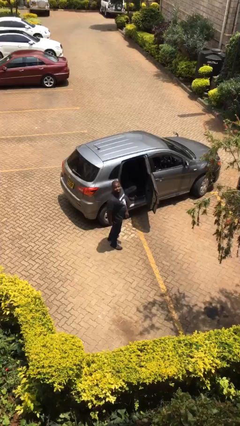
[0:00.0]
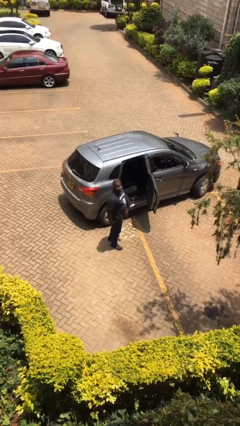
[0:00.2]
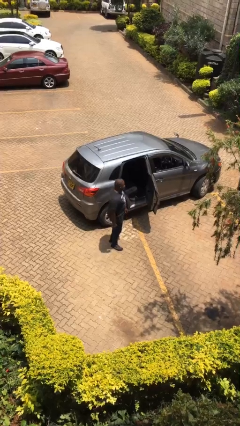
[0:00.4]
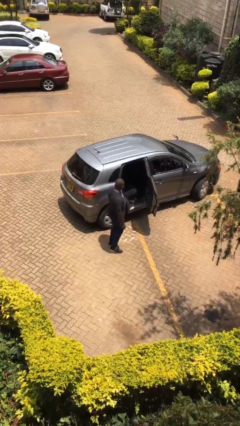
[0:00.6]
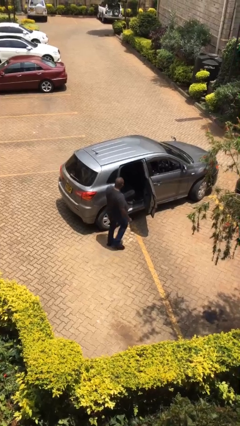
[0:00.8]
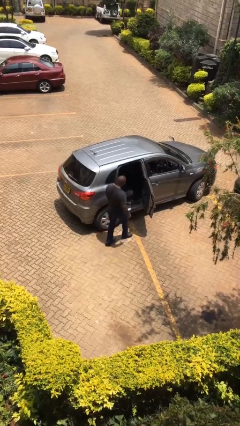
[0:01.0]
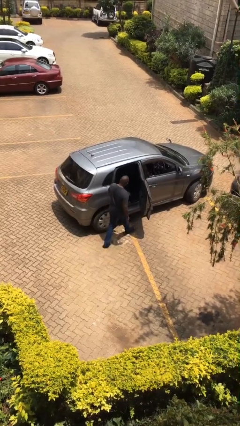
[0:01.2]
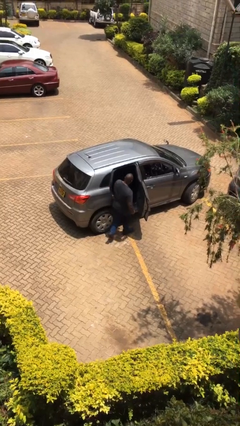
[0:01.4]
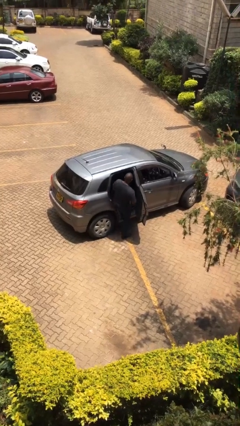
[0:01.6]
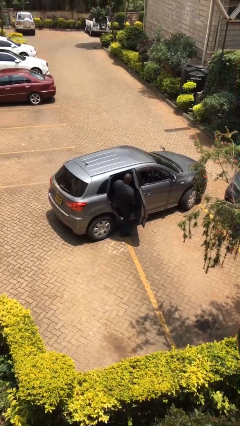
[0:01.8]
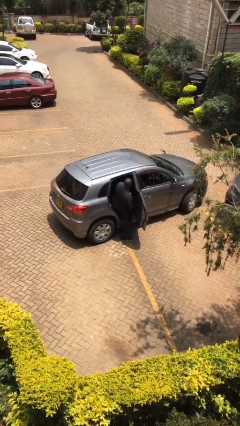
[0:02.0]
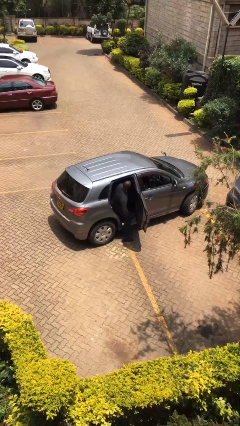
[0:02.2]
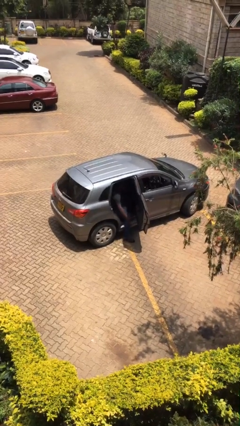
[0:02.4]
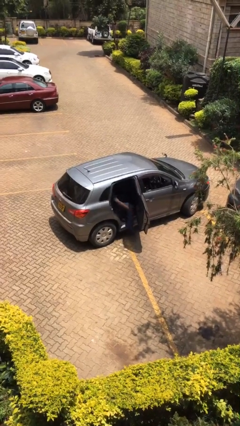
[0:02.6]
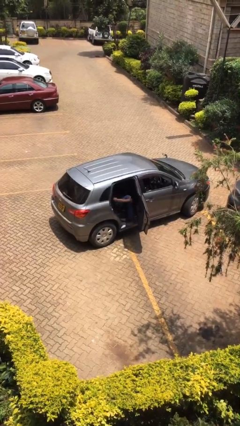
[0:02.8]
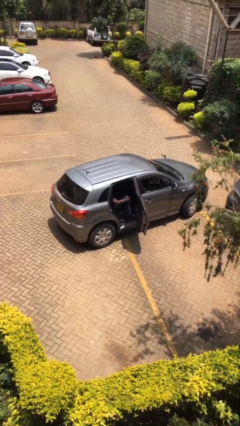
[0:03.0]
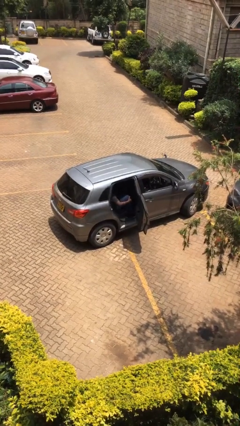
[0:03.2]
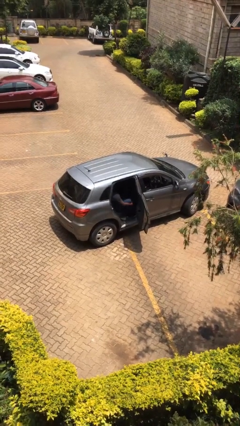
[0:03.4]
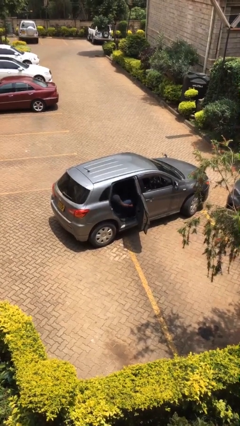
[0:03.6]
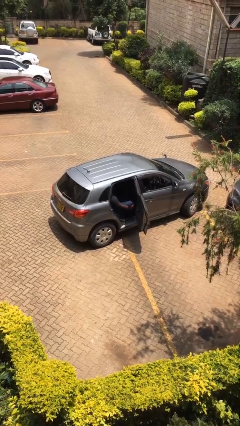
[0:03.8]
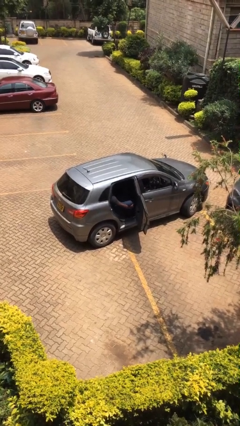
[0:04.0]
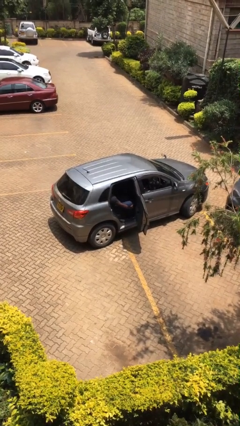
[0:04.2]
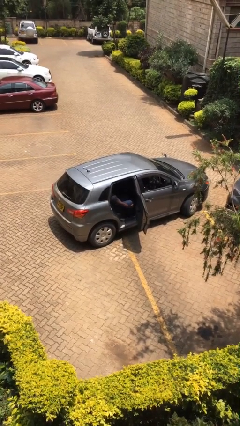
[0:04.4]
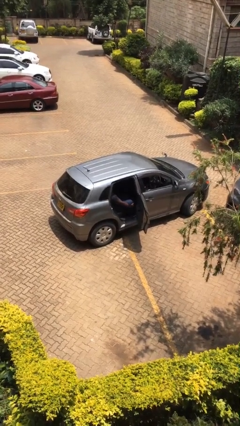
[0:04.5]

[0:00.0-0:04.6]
person enters car

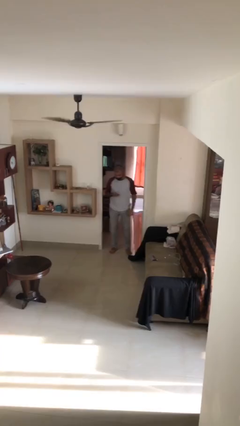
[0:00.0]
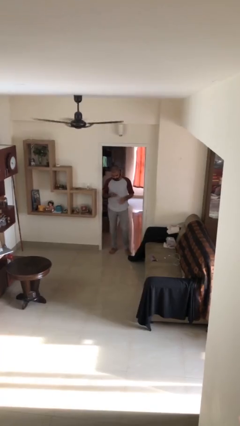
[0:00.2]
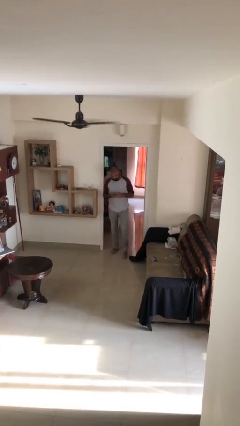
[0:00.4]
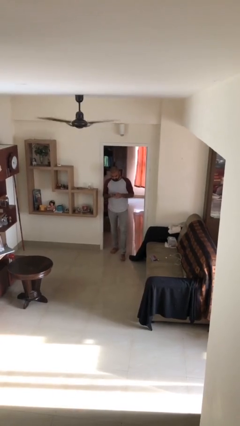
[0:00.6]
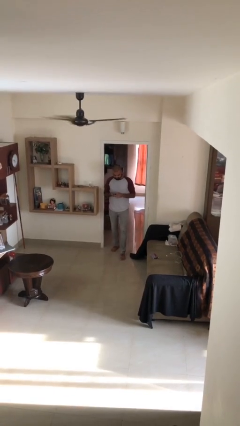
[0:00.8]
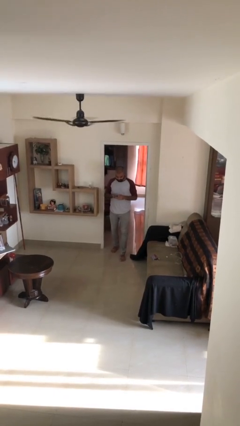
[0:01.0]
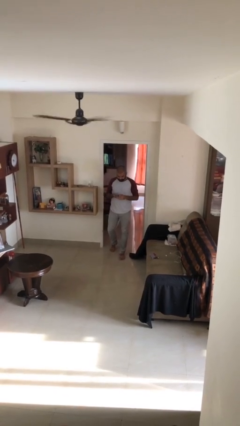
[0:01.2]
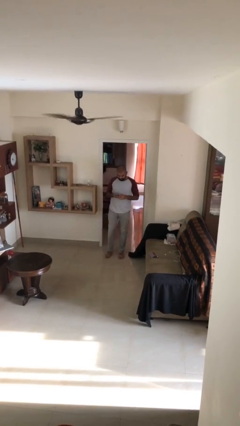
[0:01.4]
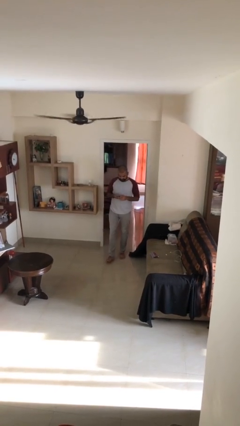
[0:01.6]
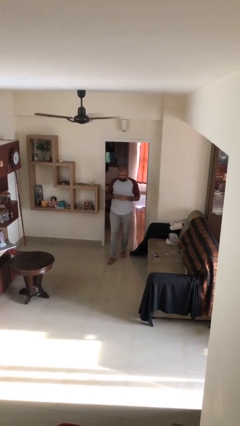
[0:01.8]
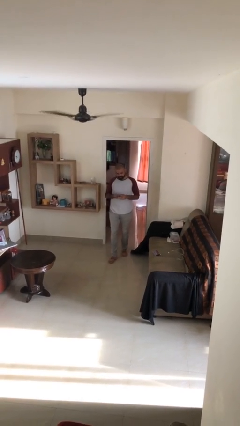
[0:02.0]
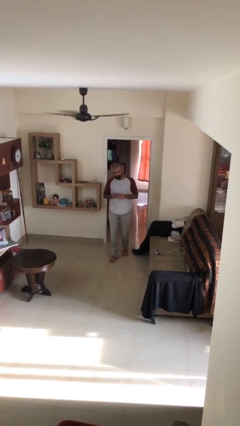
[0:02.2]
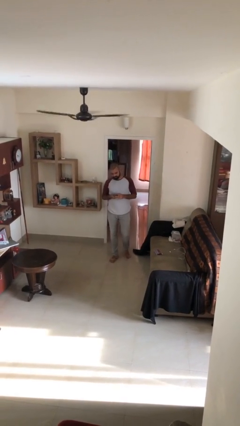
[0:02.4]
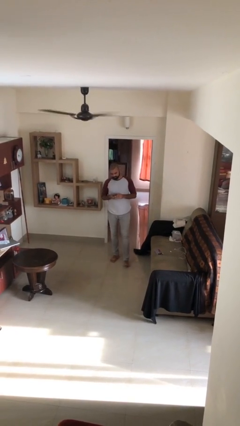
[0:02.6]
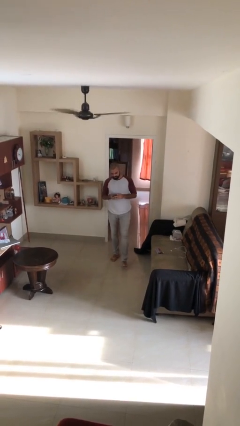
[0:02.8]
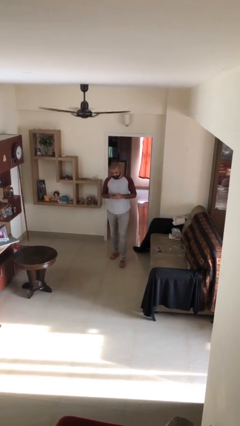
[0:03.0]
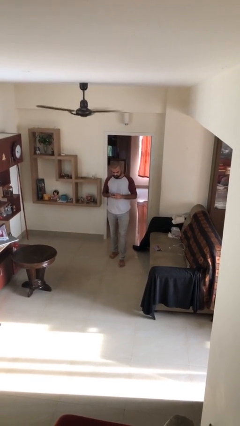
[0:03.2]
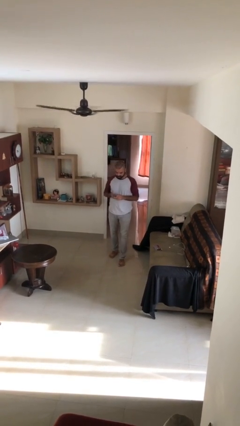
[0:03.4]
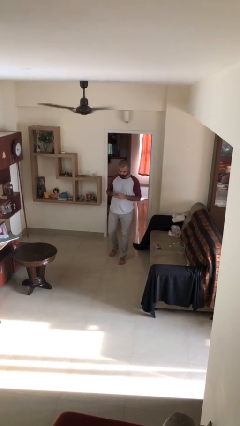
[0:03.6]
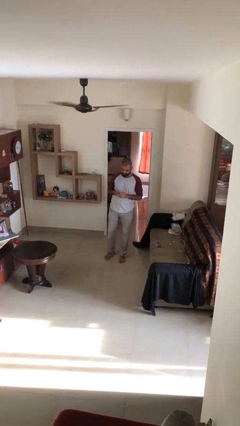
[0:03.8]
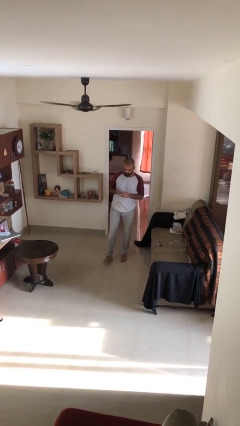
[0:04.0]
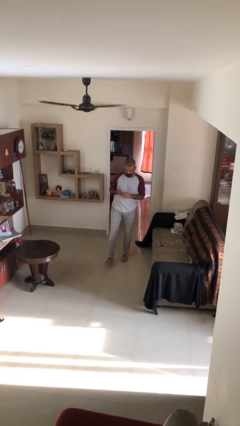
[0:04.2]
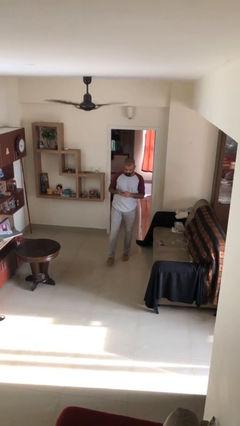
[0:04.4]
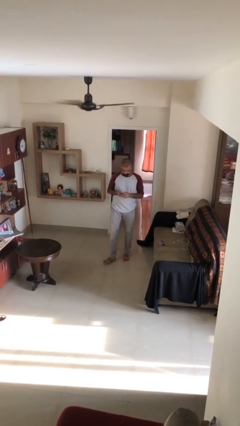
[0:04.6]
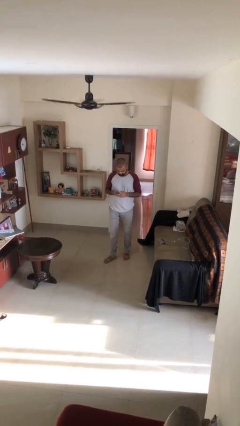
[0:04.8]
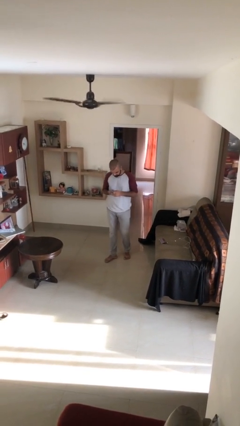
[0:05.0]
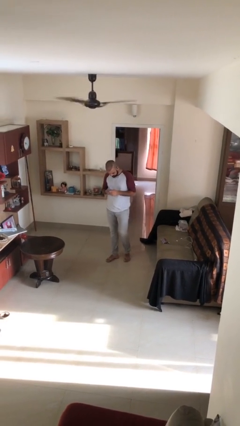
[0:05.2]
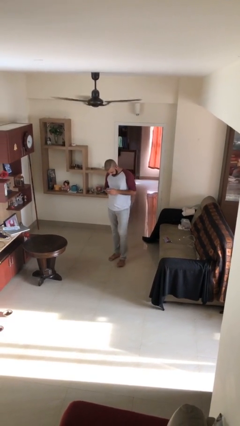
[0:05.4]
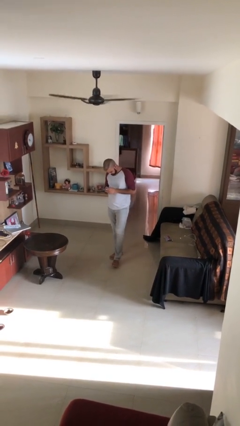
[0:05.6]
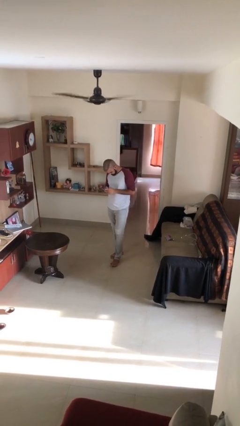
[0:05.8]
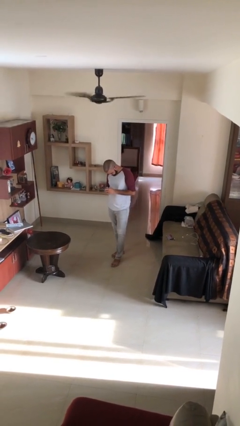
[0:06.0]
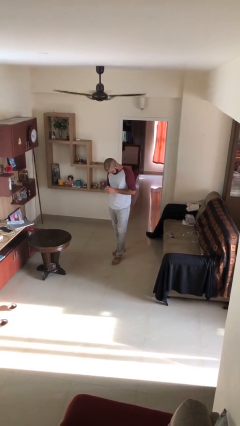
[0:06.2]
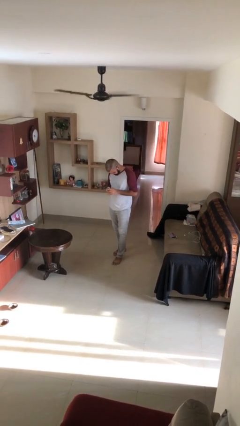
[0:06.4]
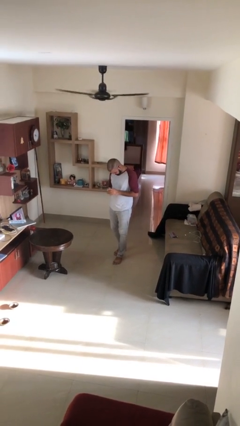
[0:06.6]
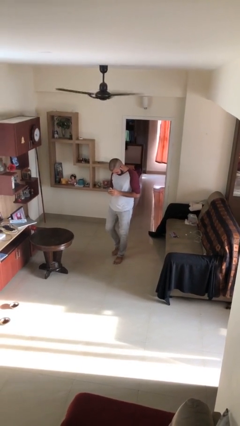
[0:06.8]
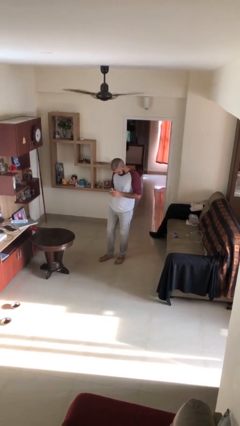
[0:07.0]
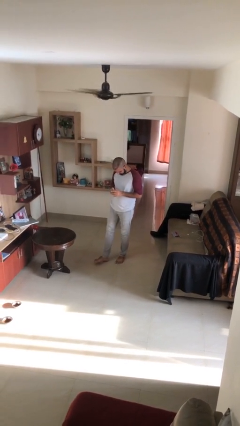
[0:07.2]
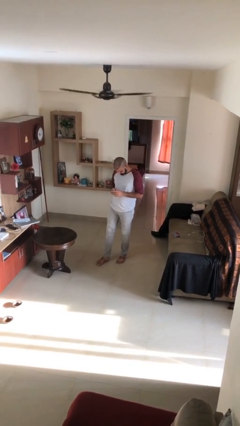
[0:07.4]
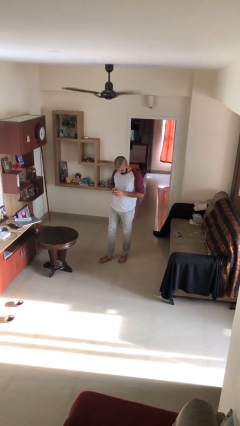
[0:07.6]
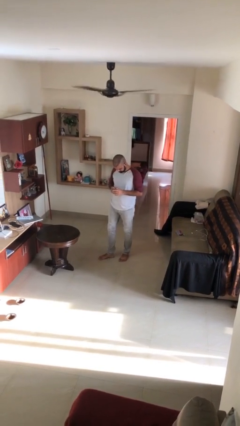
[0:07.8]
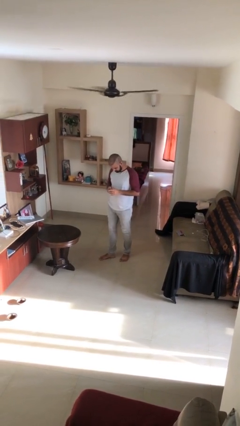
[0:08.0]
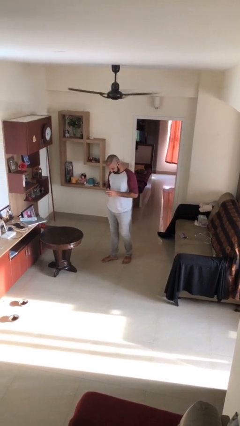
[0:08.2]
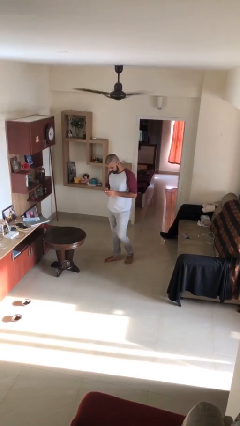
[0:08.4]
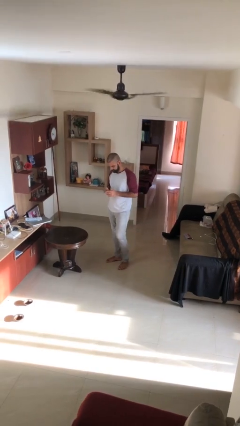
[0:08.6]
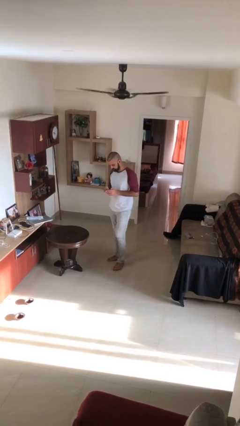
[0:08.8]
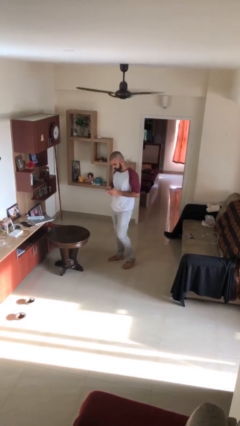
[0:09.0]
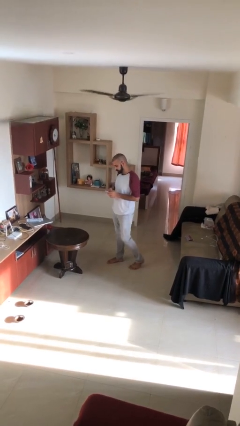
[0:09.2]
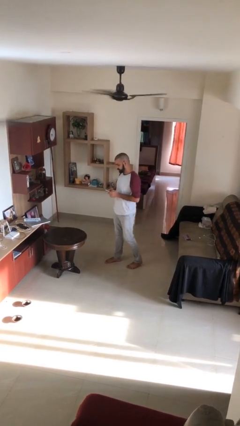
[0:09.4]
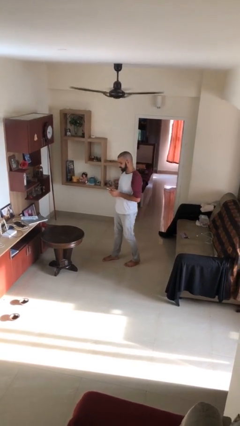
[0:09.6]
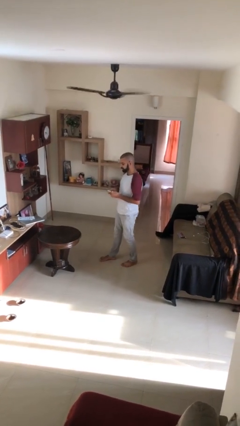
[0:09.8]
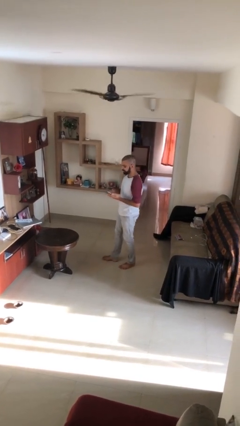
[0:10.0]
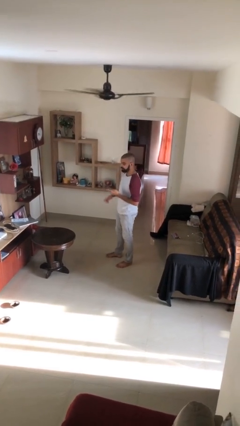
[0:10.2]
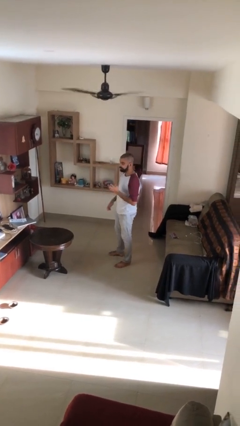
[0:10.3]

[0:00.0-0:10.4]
person texts on phone

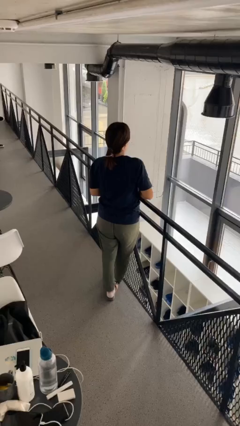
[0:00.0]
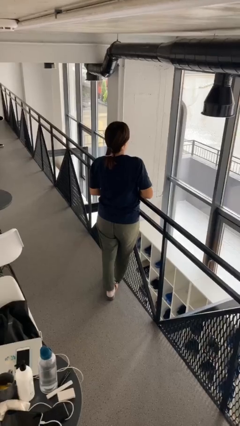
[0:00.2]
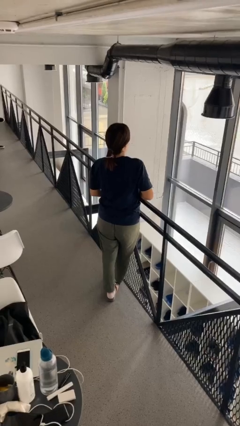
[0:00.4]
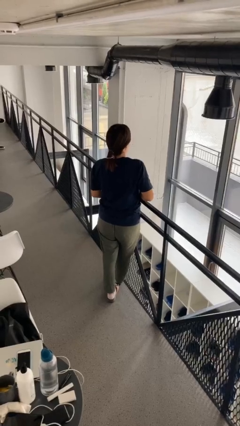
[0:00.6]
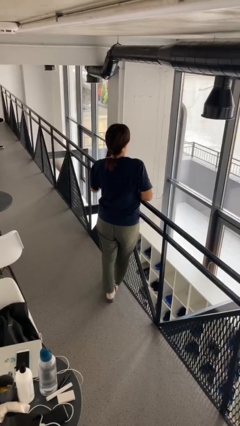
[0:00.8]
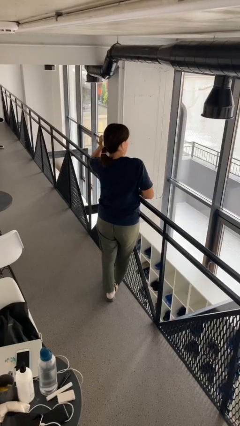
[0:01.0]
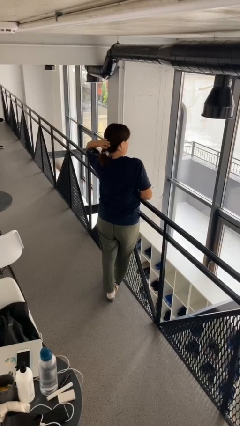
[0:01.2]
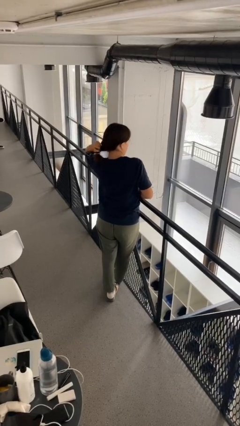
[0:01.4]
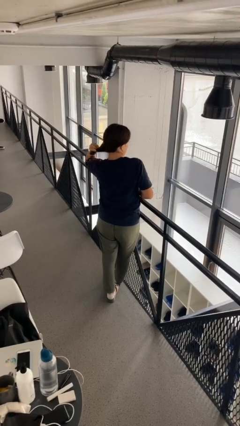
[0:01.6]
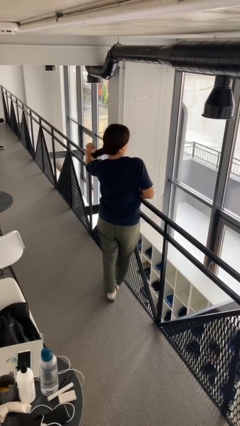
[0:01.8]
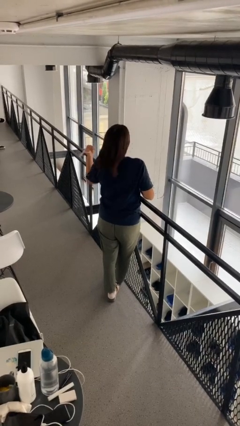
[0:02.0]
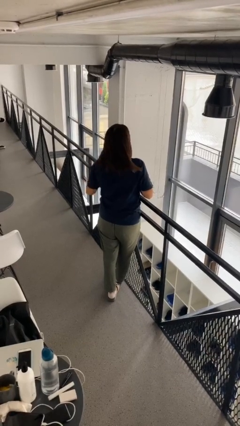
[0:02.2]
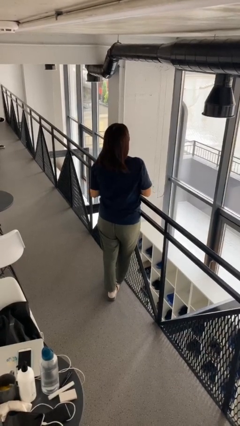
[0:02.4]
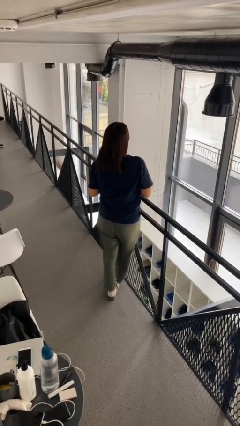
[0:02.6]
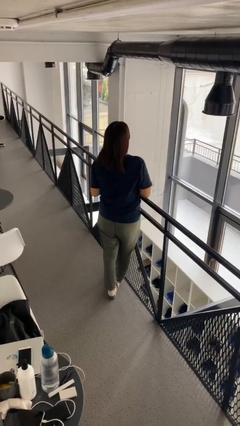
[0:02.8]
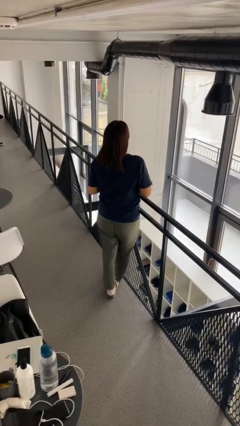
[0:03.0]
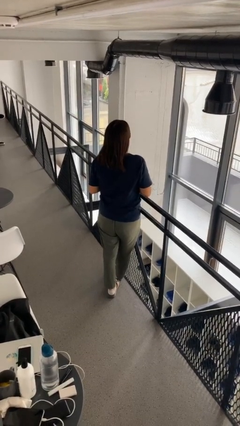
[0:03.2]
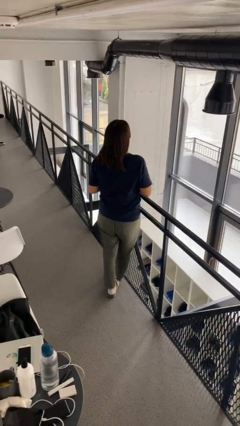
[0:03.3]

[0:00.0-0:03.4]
person takes off hairtie
